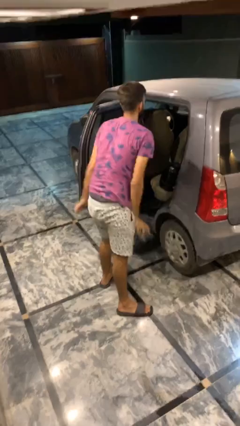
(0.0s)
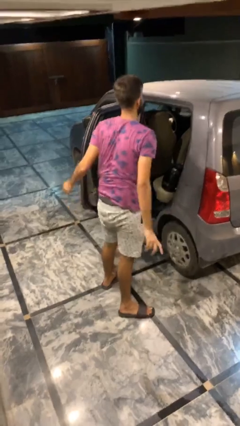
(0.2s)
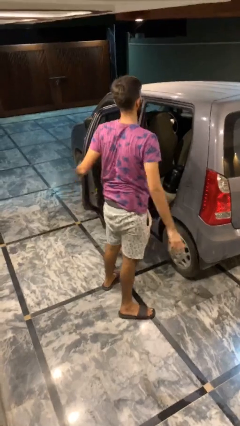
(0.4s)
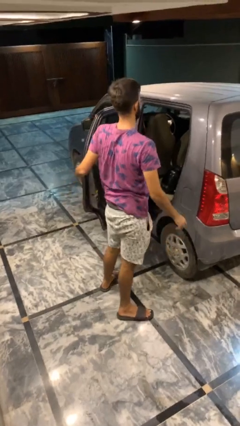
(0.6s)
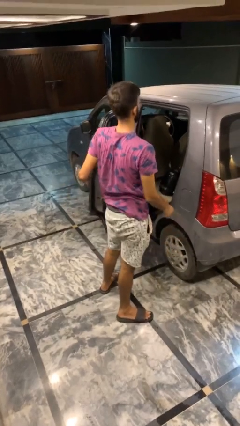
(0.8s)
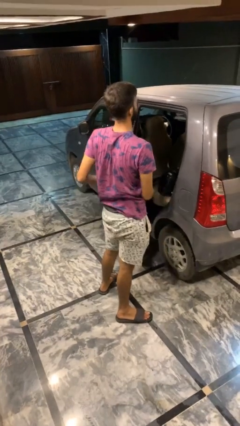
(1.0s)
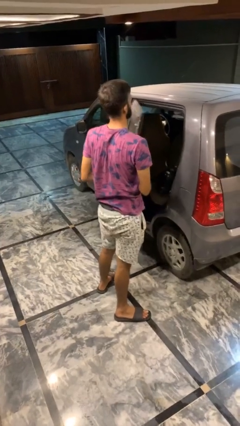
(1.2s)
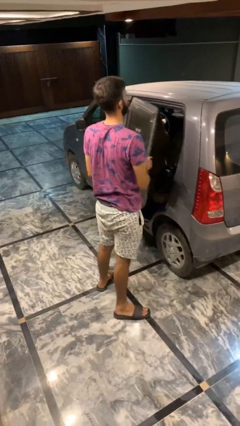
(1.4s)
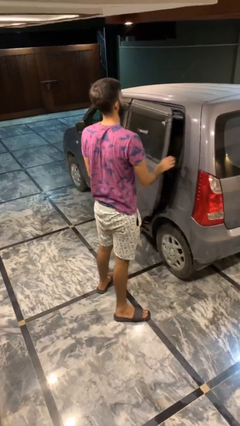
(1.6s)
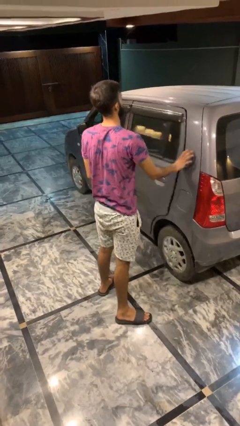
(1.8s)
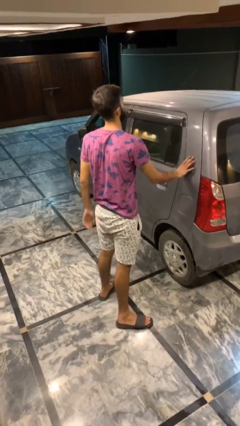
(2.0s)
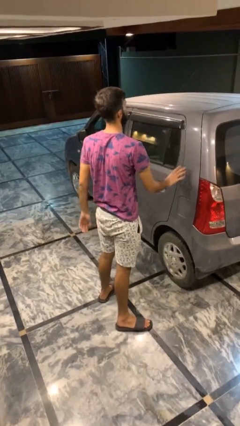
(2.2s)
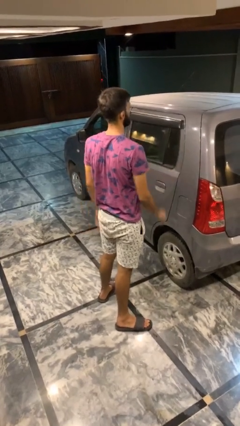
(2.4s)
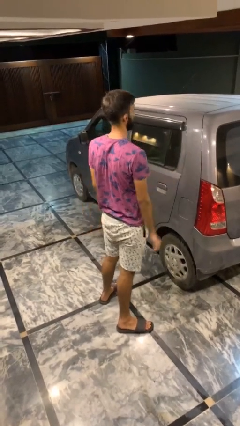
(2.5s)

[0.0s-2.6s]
person closes car door

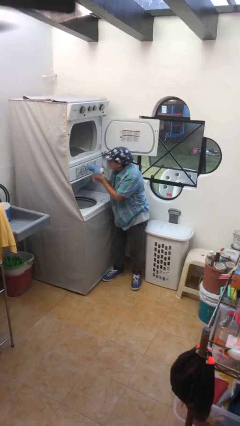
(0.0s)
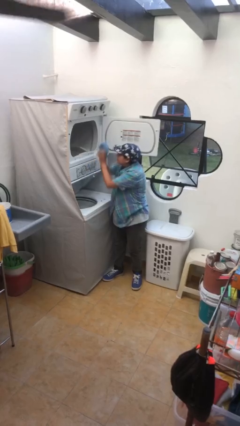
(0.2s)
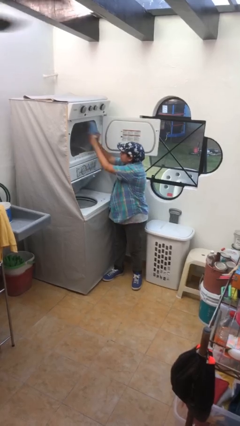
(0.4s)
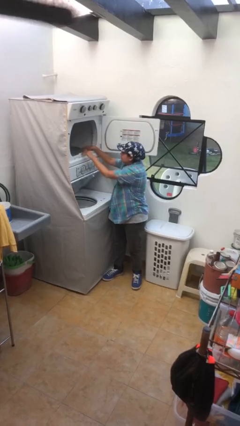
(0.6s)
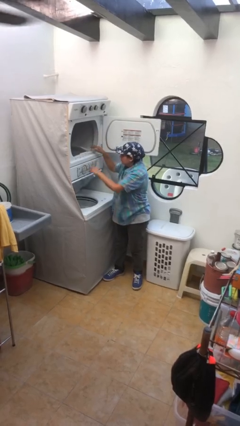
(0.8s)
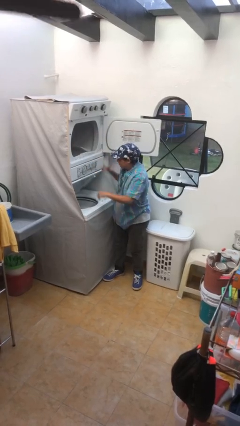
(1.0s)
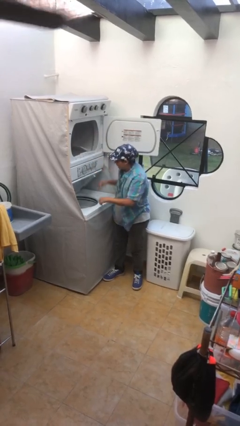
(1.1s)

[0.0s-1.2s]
person loads dryer

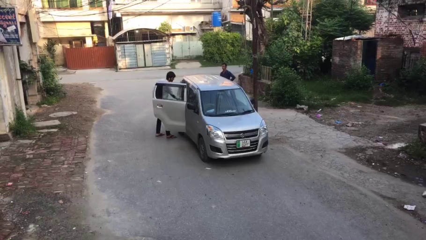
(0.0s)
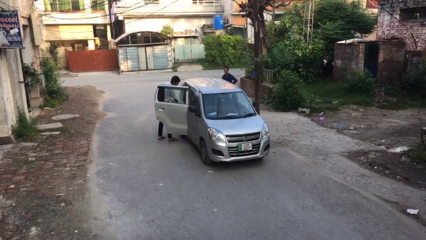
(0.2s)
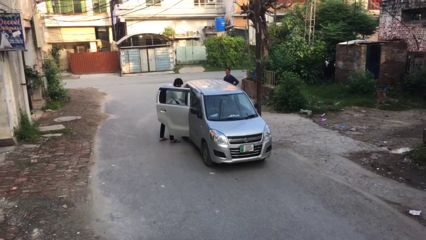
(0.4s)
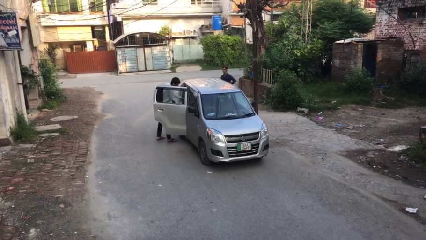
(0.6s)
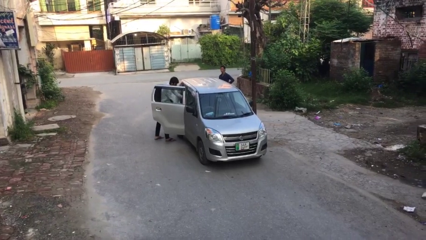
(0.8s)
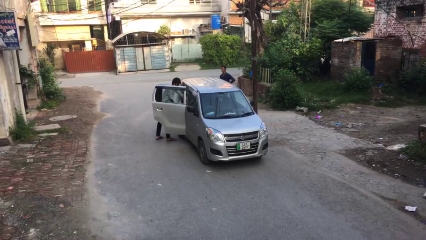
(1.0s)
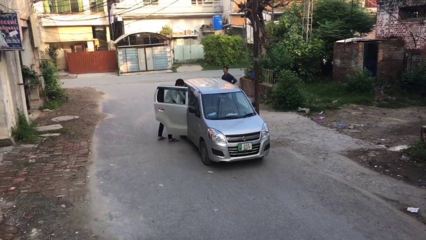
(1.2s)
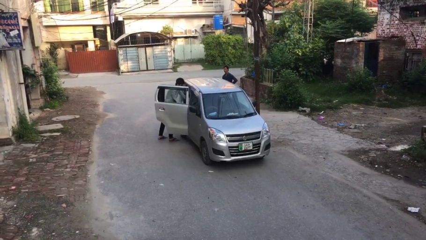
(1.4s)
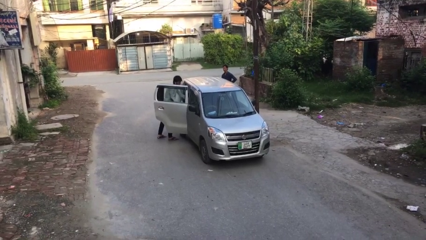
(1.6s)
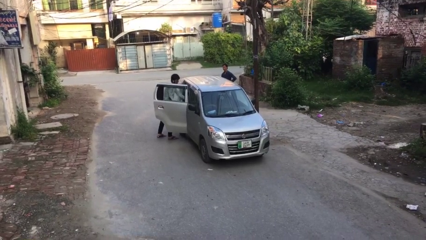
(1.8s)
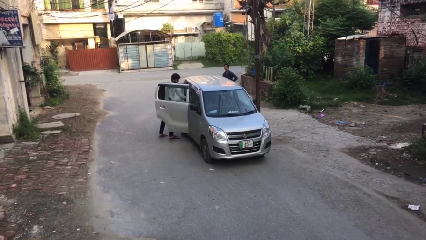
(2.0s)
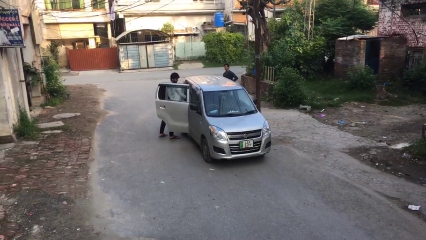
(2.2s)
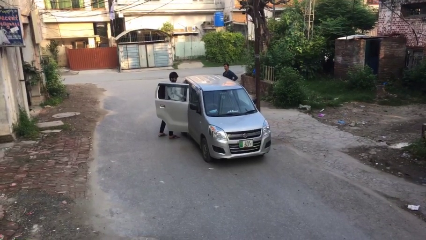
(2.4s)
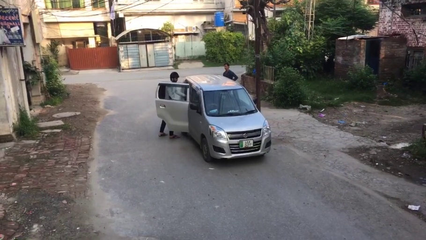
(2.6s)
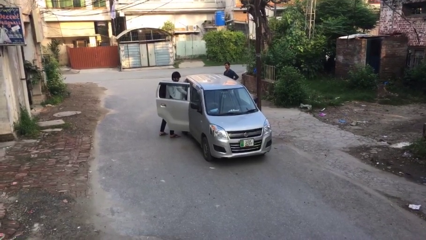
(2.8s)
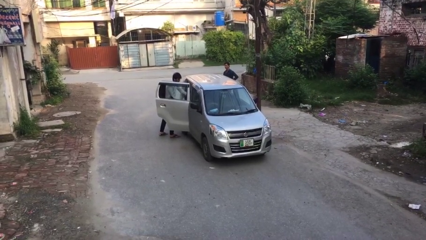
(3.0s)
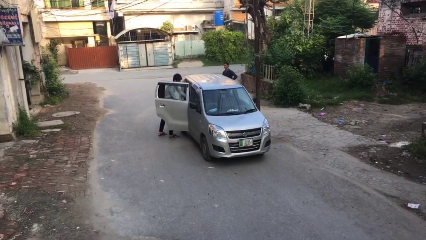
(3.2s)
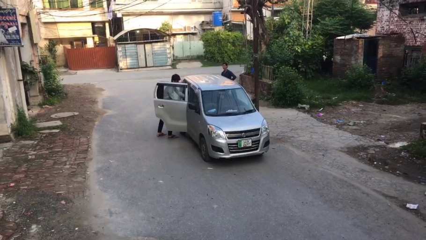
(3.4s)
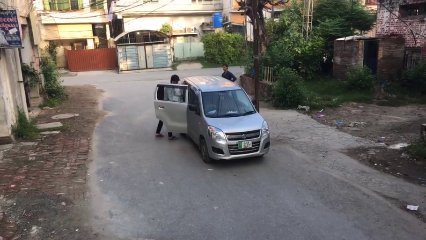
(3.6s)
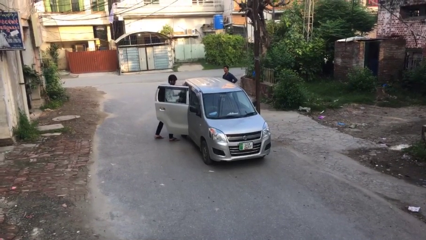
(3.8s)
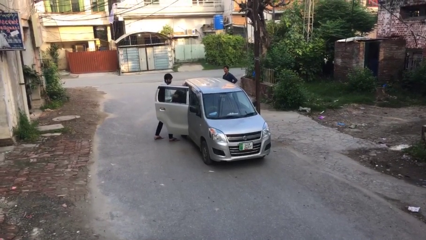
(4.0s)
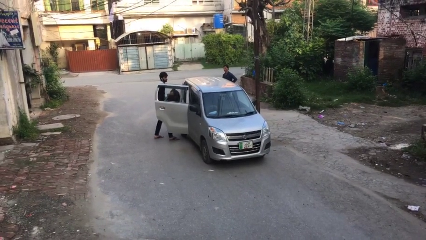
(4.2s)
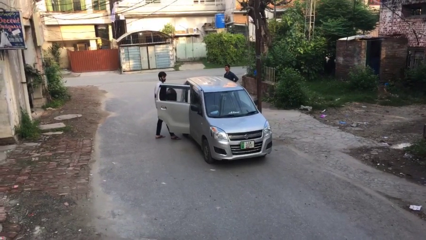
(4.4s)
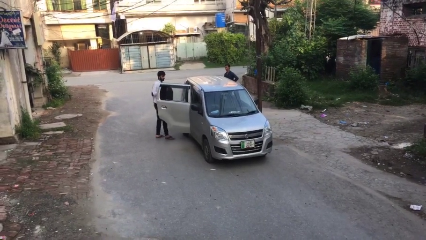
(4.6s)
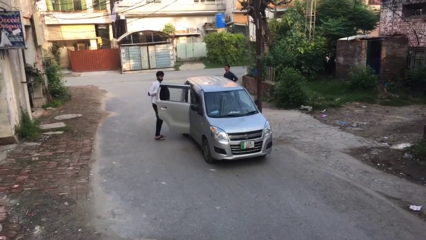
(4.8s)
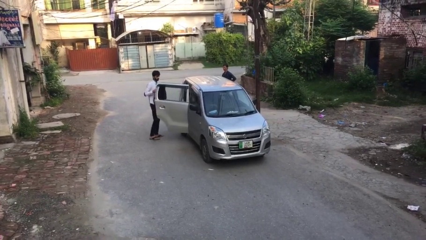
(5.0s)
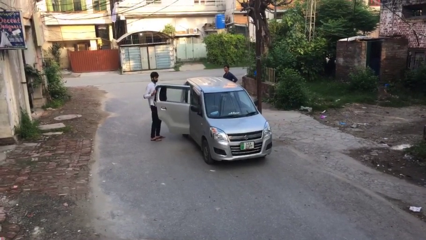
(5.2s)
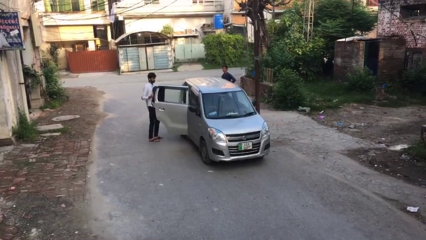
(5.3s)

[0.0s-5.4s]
person unloads car

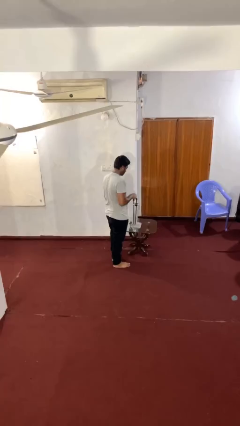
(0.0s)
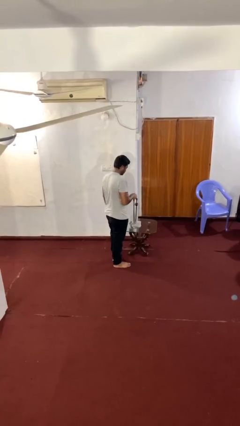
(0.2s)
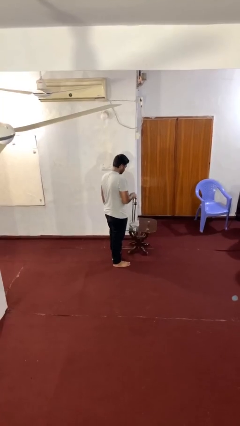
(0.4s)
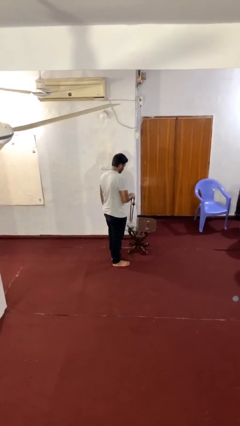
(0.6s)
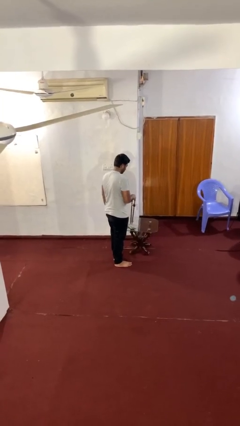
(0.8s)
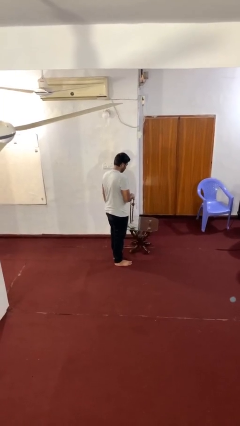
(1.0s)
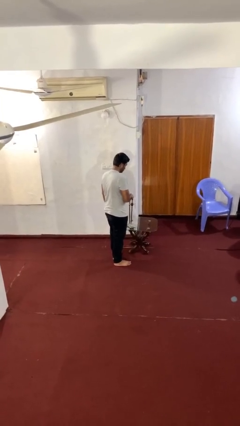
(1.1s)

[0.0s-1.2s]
person puts down object on table

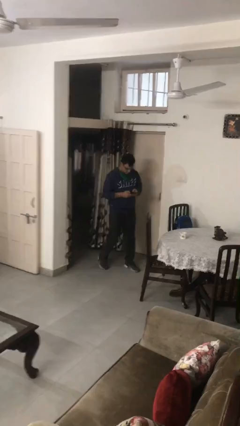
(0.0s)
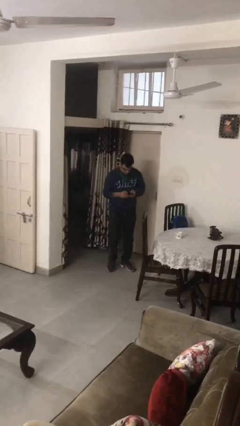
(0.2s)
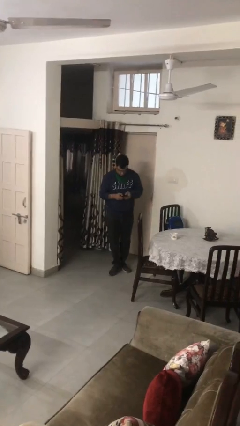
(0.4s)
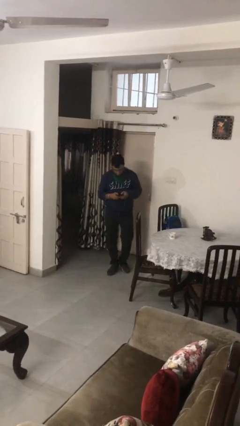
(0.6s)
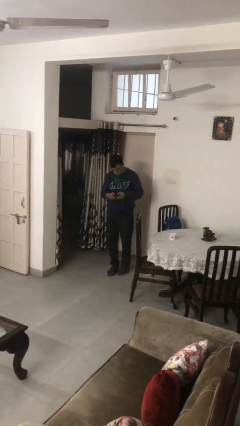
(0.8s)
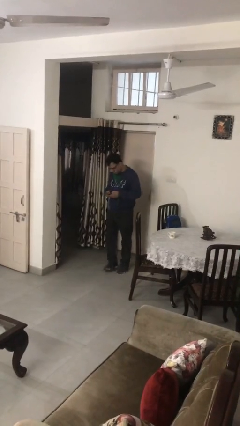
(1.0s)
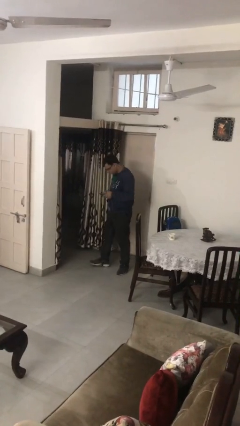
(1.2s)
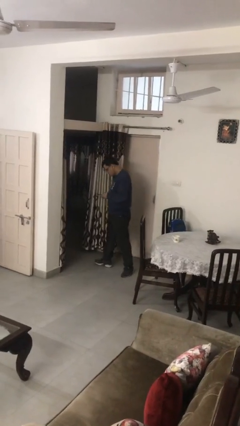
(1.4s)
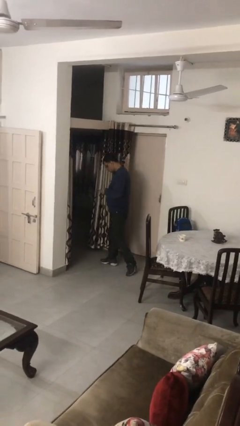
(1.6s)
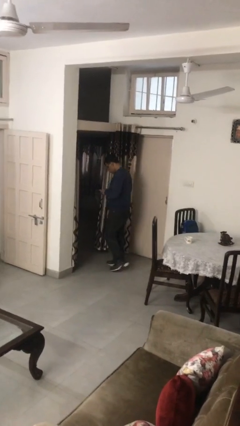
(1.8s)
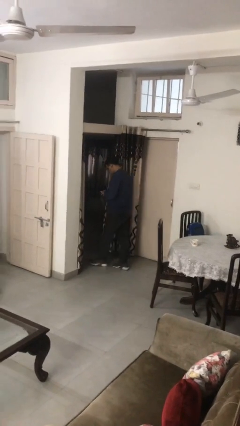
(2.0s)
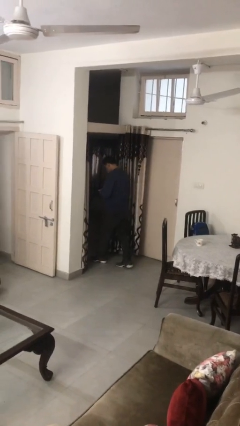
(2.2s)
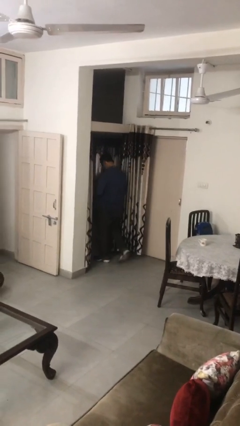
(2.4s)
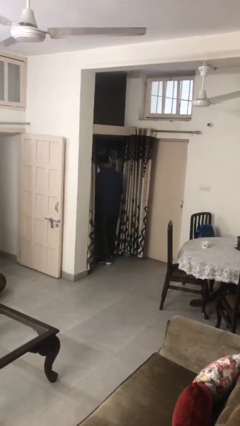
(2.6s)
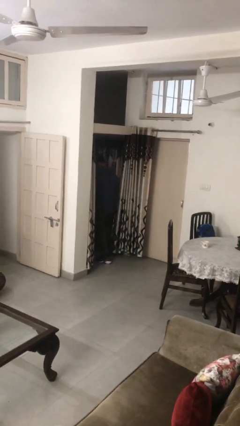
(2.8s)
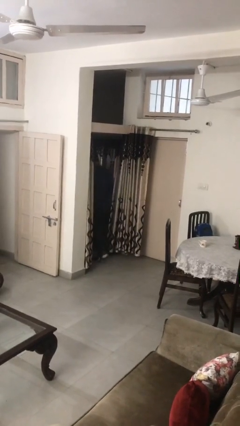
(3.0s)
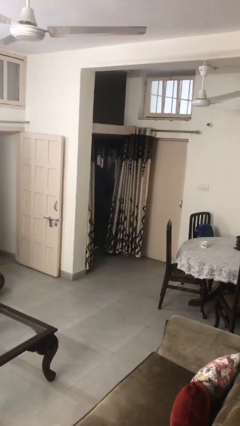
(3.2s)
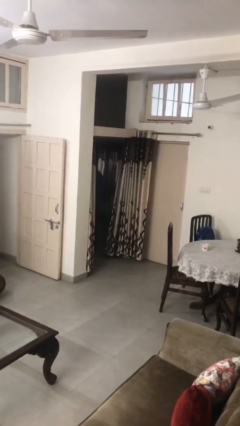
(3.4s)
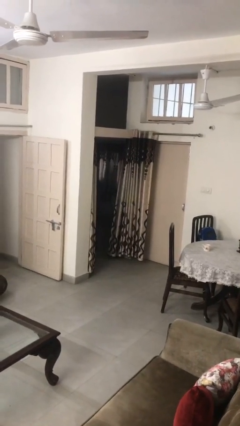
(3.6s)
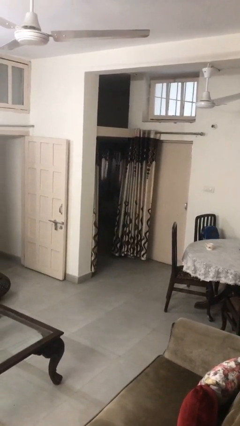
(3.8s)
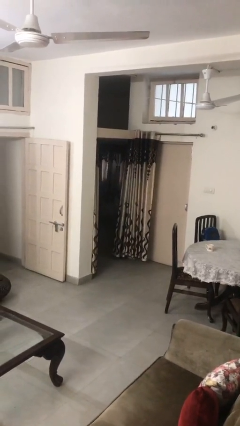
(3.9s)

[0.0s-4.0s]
person exits scene through structure

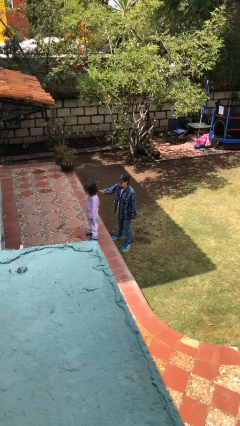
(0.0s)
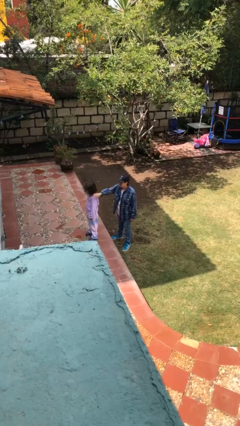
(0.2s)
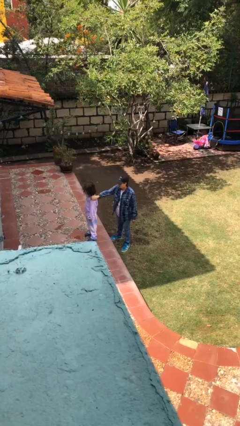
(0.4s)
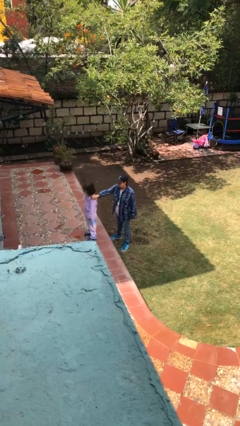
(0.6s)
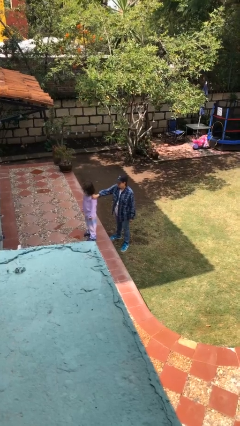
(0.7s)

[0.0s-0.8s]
person grabs person by shoulder

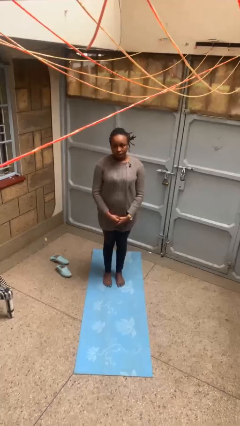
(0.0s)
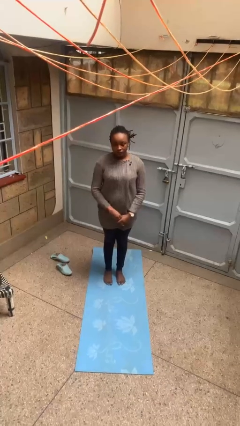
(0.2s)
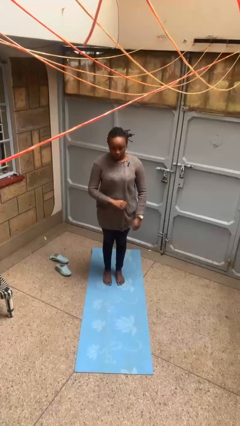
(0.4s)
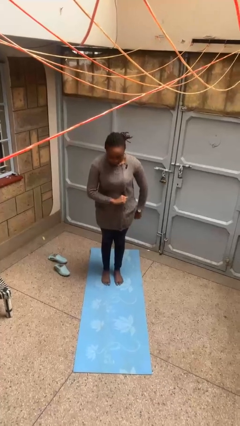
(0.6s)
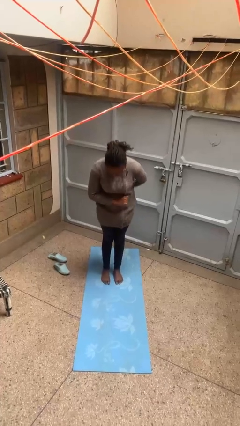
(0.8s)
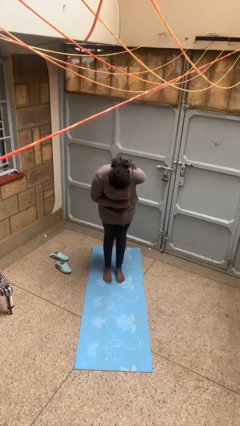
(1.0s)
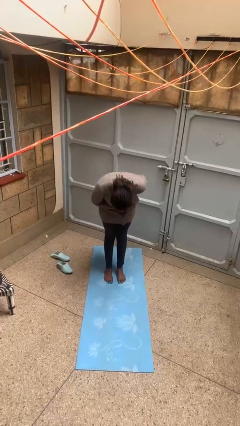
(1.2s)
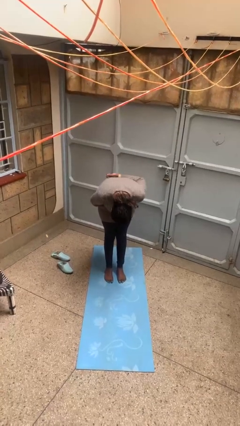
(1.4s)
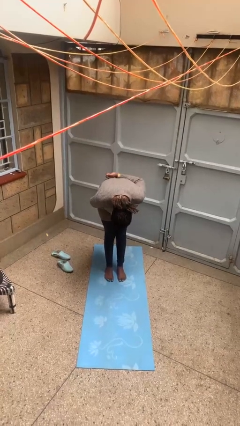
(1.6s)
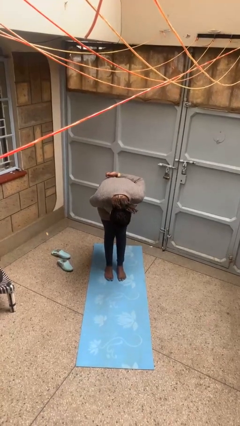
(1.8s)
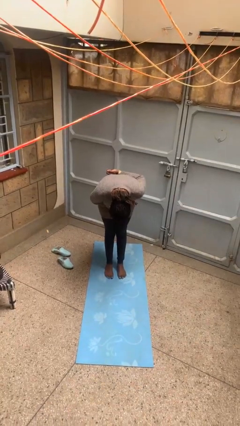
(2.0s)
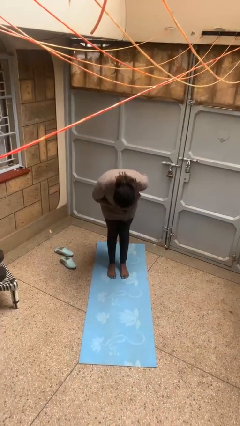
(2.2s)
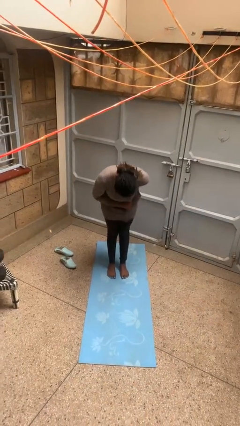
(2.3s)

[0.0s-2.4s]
person bows
